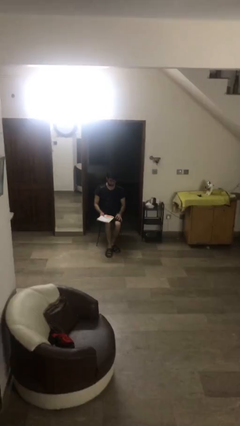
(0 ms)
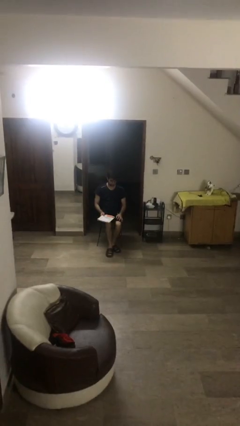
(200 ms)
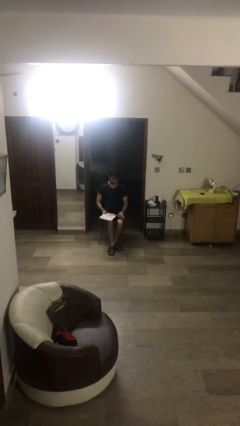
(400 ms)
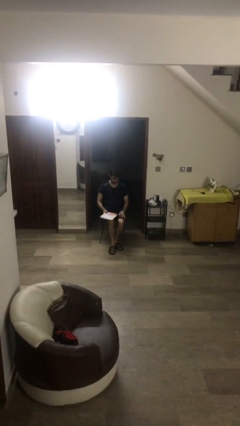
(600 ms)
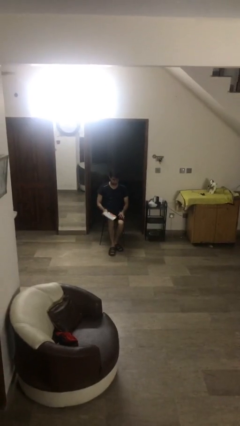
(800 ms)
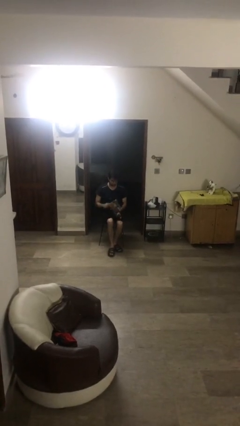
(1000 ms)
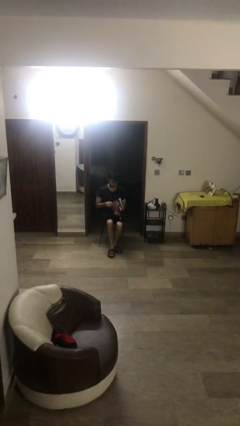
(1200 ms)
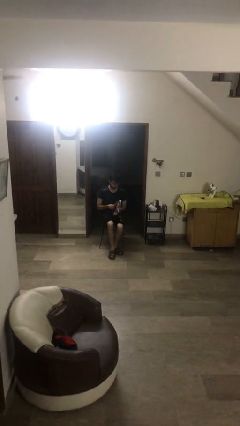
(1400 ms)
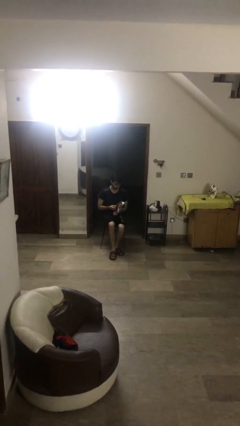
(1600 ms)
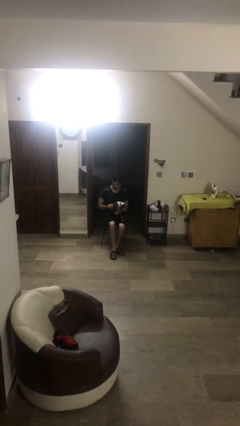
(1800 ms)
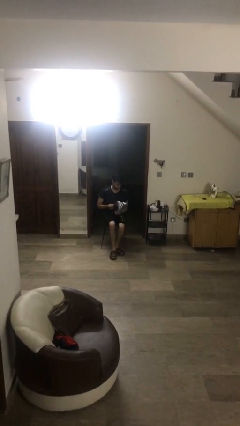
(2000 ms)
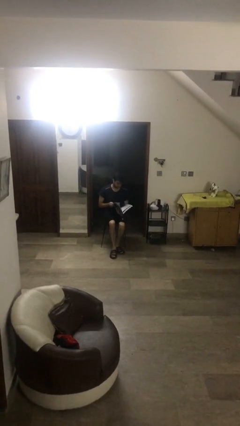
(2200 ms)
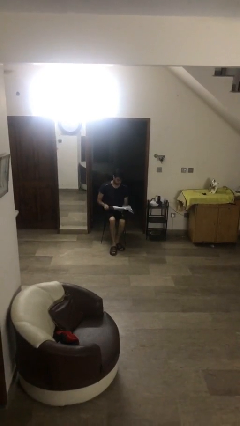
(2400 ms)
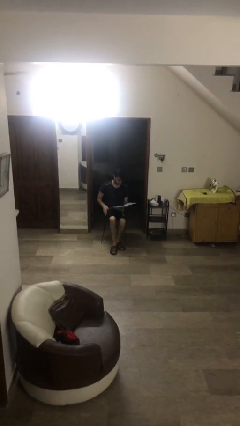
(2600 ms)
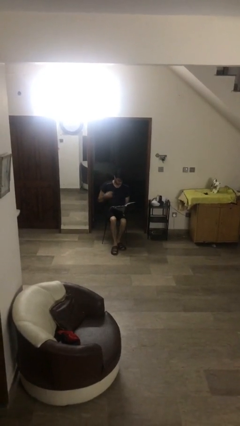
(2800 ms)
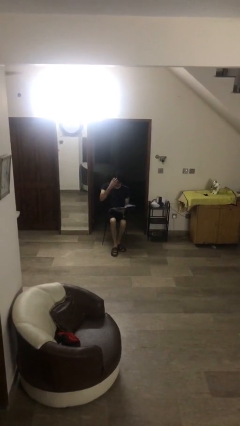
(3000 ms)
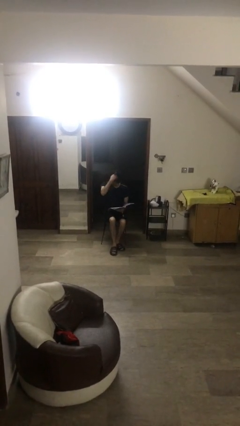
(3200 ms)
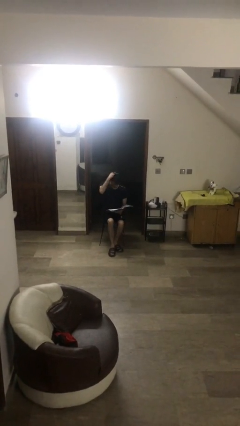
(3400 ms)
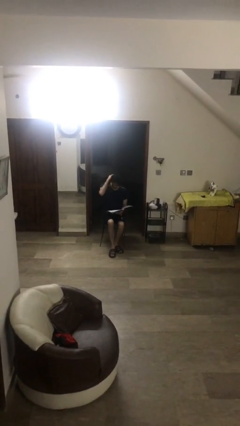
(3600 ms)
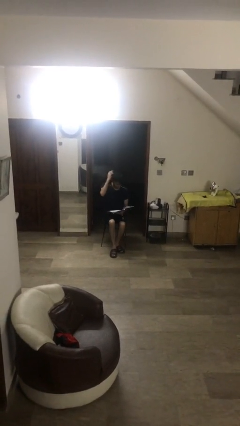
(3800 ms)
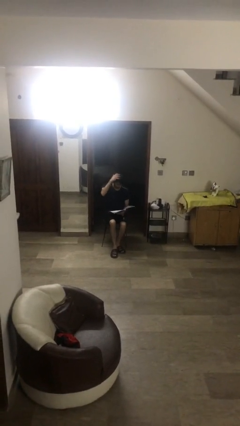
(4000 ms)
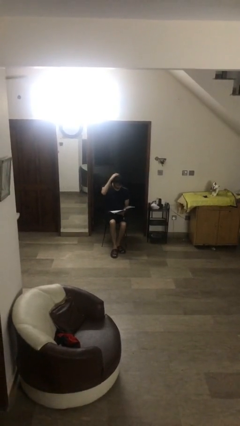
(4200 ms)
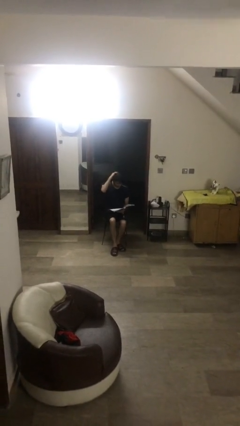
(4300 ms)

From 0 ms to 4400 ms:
person reads document

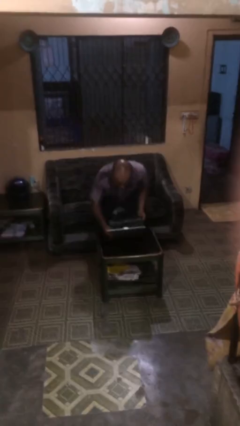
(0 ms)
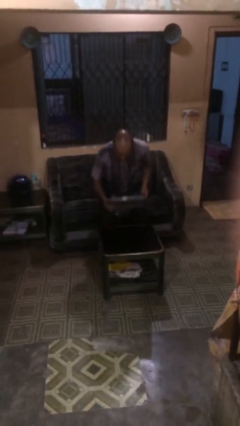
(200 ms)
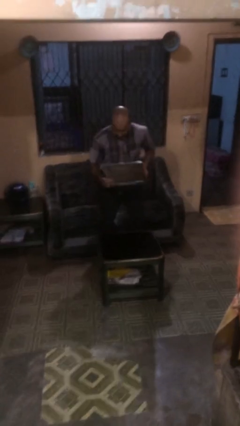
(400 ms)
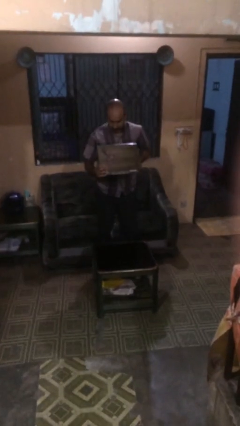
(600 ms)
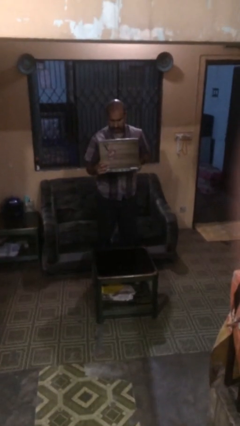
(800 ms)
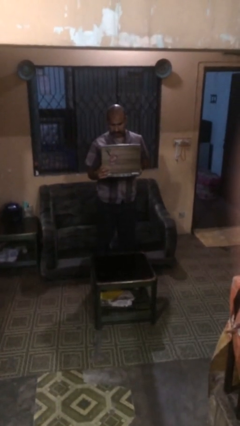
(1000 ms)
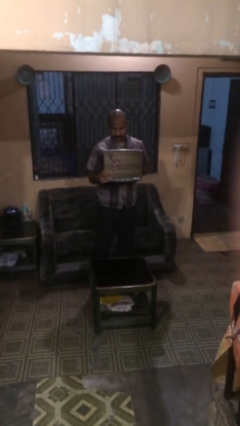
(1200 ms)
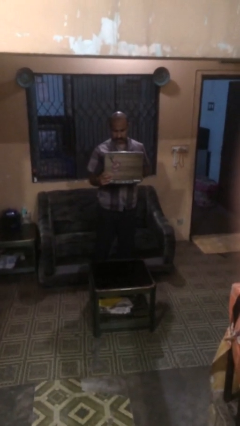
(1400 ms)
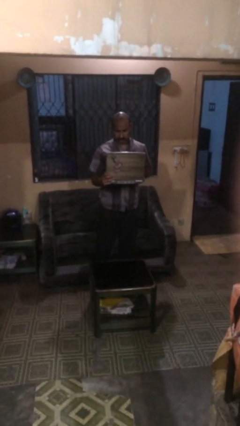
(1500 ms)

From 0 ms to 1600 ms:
person stands up

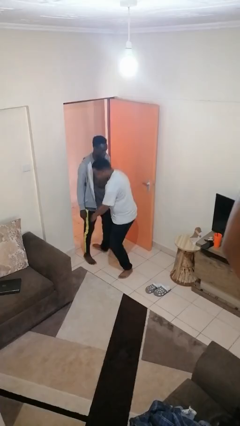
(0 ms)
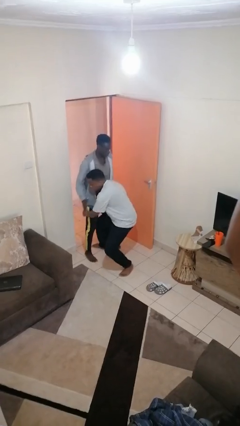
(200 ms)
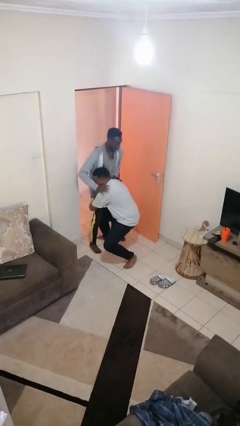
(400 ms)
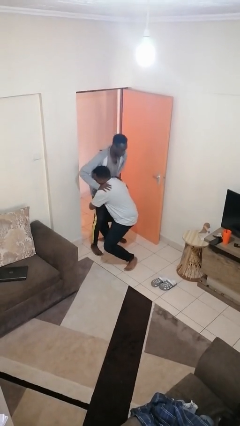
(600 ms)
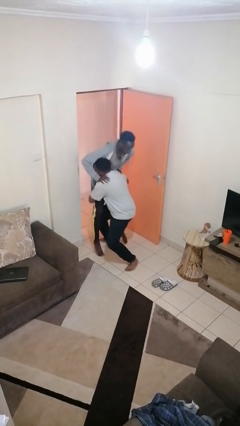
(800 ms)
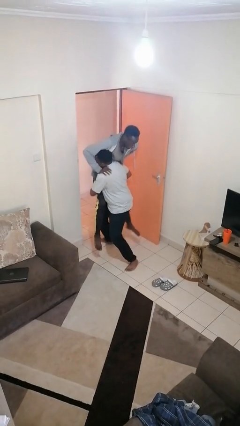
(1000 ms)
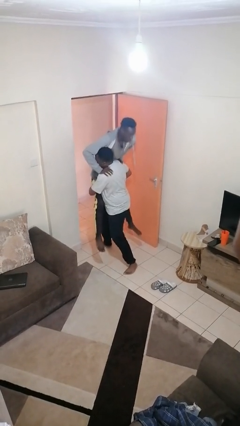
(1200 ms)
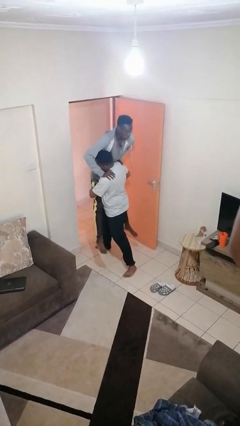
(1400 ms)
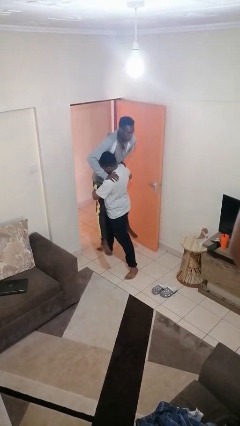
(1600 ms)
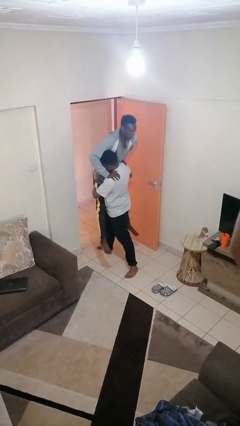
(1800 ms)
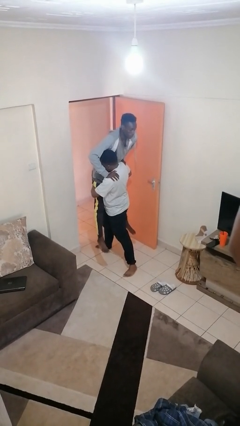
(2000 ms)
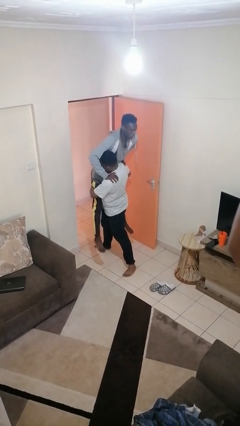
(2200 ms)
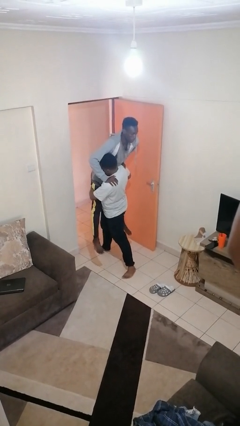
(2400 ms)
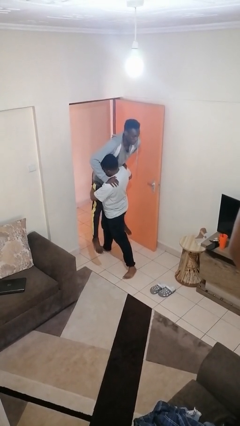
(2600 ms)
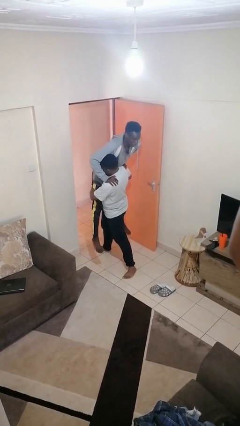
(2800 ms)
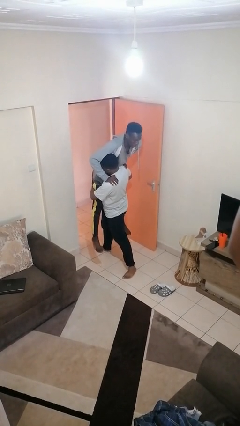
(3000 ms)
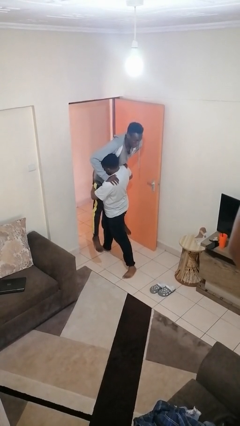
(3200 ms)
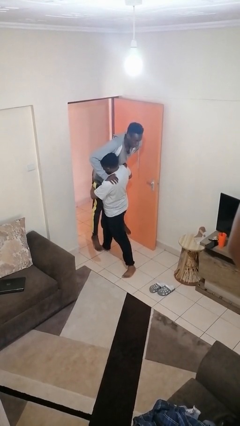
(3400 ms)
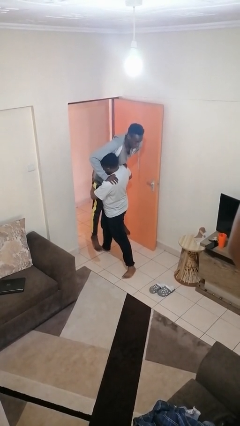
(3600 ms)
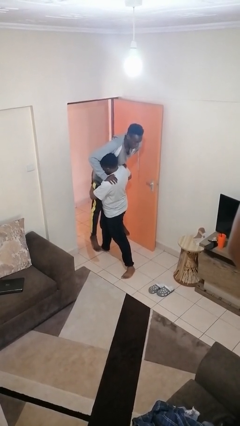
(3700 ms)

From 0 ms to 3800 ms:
person picks up person

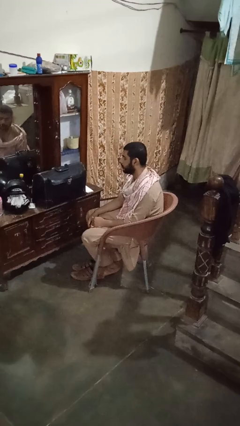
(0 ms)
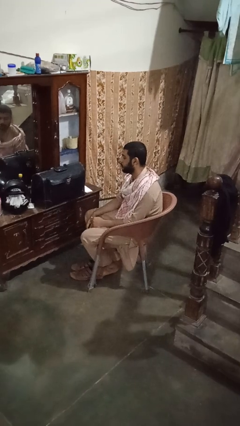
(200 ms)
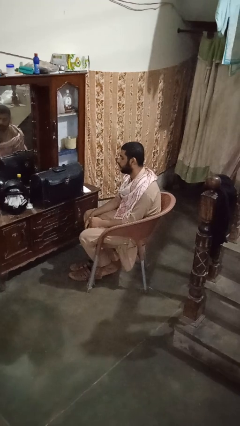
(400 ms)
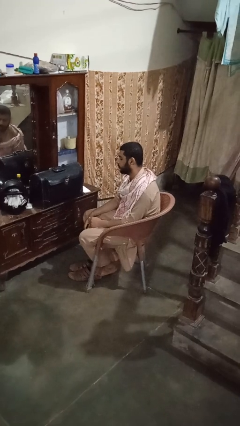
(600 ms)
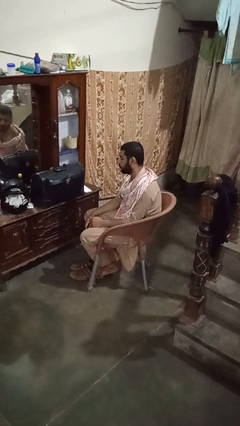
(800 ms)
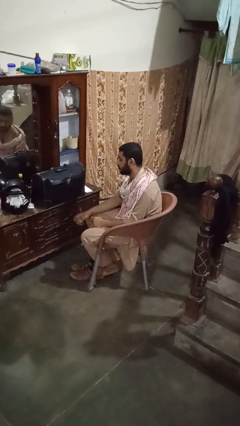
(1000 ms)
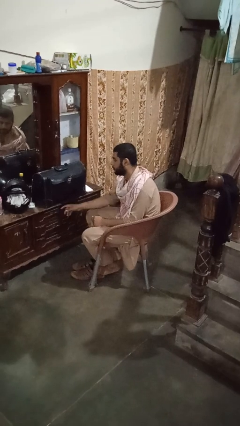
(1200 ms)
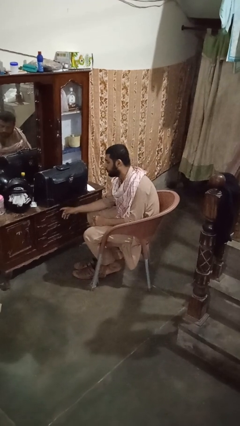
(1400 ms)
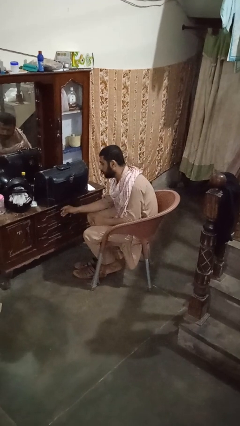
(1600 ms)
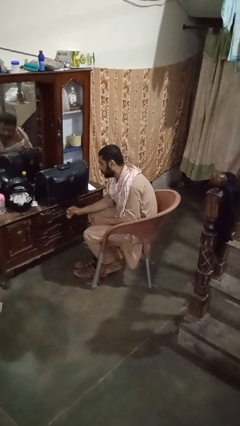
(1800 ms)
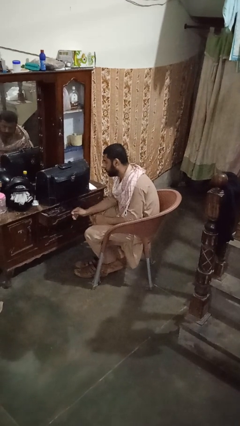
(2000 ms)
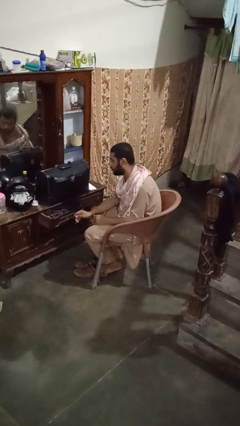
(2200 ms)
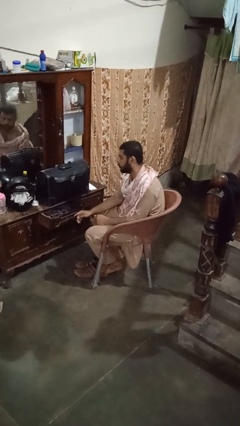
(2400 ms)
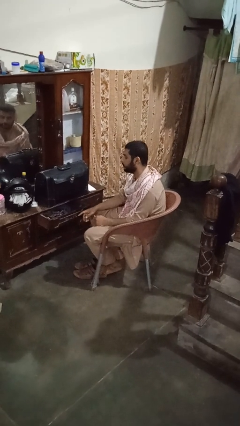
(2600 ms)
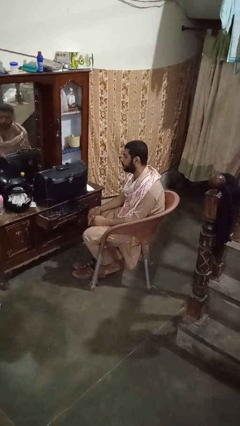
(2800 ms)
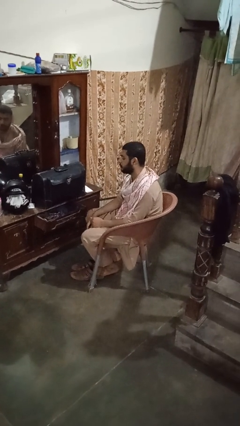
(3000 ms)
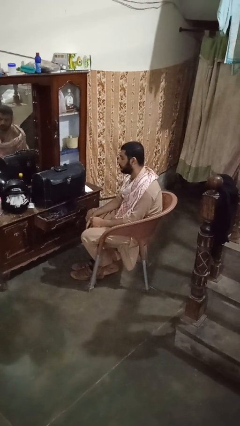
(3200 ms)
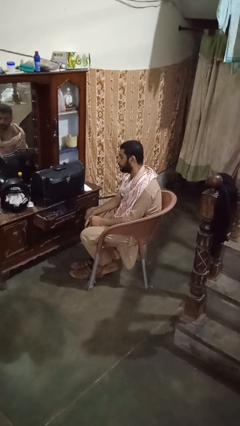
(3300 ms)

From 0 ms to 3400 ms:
person opens dresser drawer

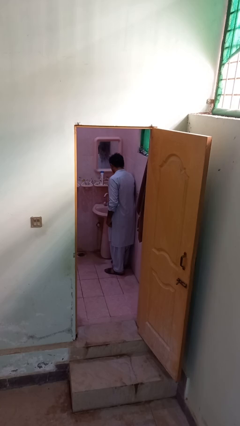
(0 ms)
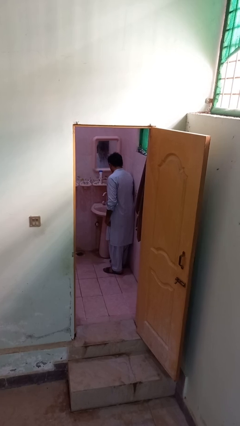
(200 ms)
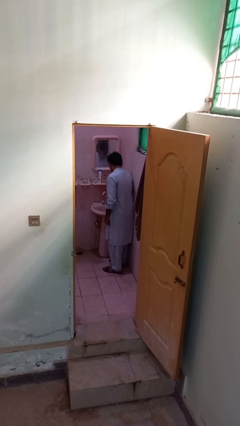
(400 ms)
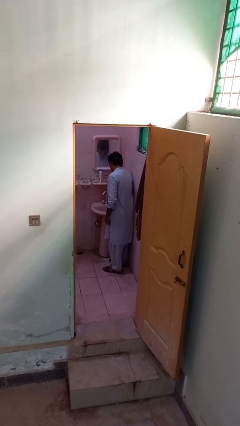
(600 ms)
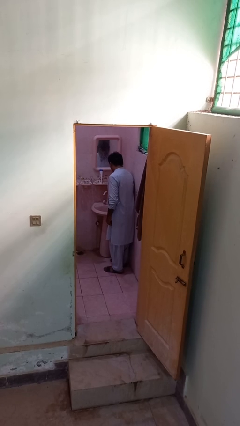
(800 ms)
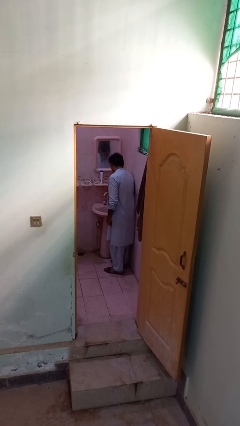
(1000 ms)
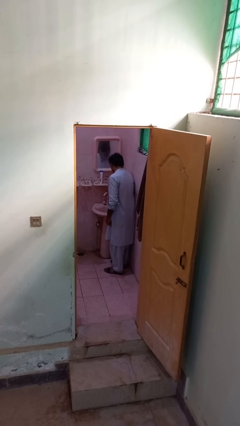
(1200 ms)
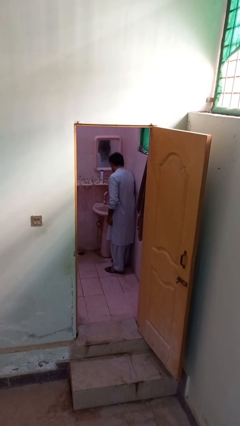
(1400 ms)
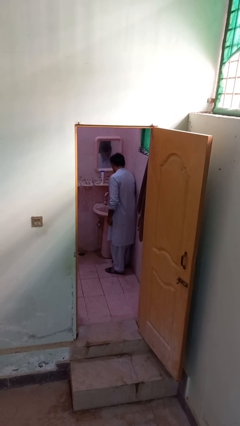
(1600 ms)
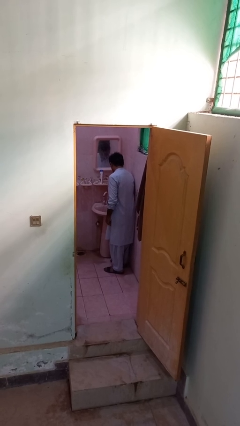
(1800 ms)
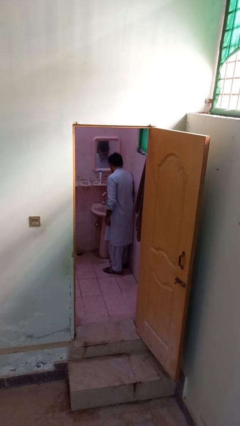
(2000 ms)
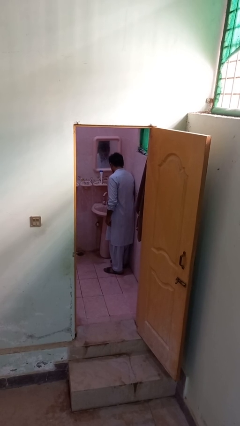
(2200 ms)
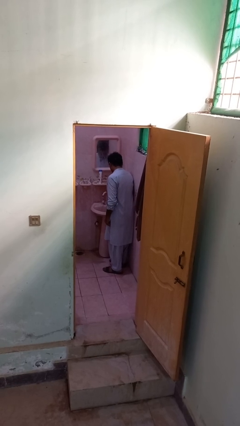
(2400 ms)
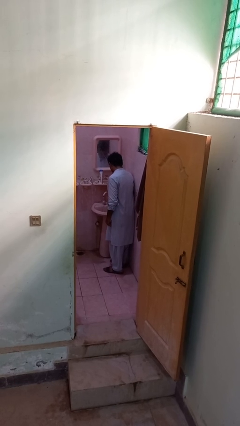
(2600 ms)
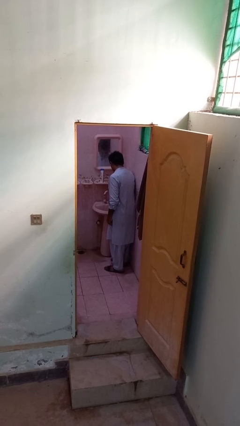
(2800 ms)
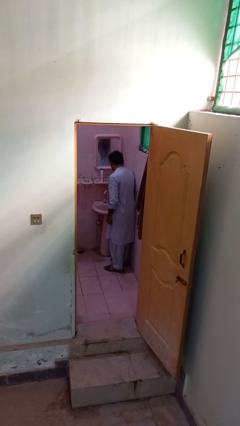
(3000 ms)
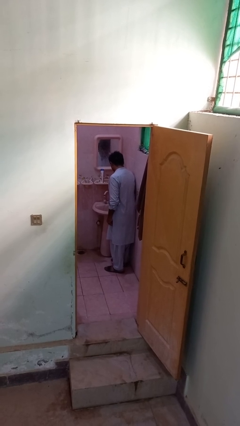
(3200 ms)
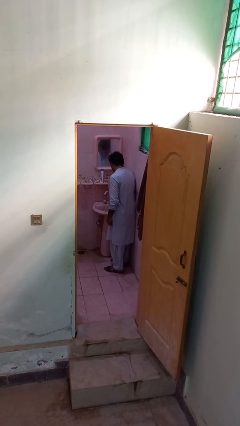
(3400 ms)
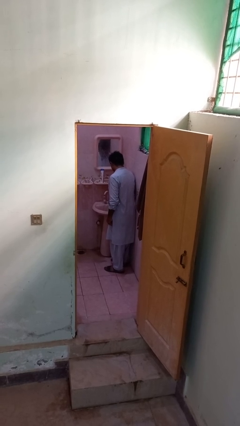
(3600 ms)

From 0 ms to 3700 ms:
person turns on faucet

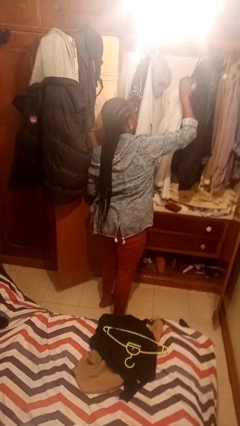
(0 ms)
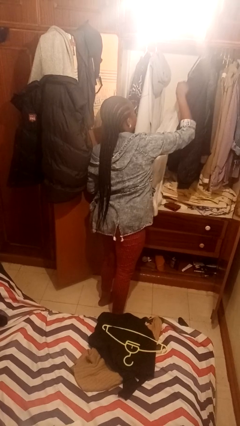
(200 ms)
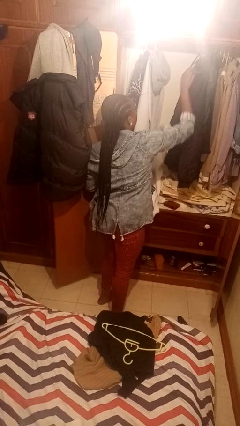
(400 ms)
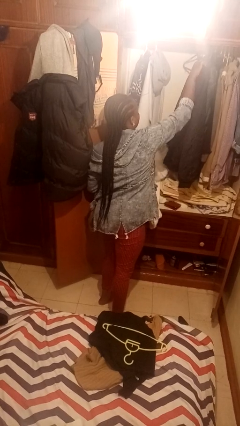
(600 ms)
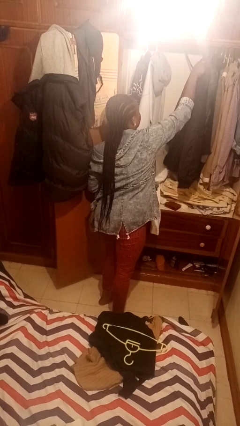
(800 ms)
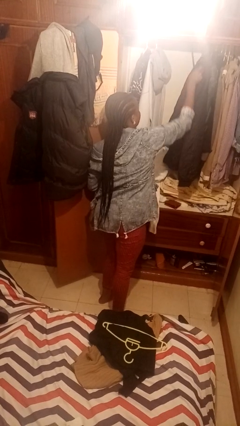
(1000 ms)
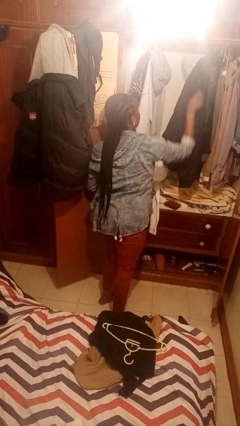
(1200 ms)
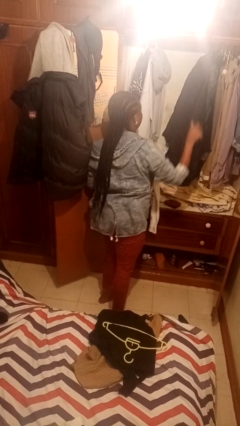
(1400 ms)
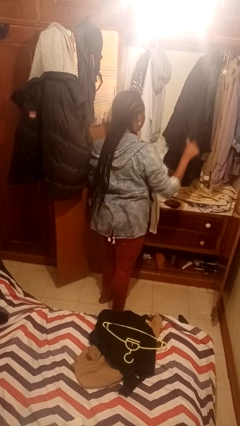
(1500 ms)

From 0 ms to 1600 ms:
person takes clothes from closet
